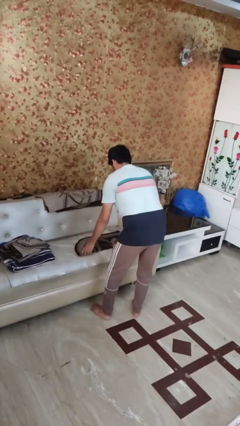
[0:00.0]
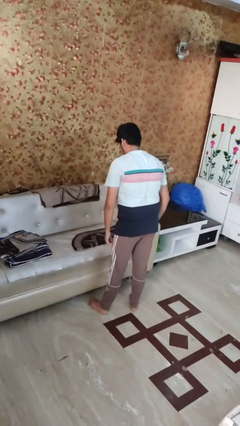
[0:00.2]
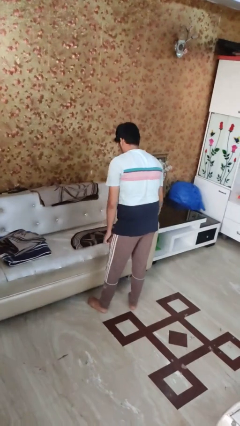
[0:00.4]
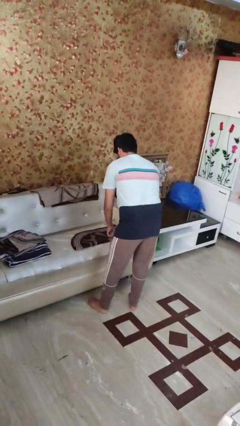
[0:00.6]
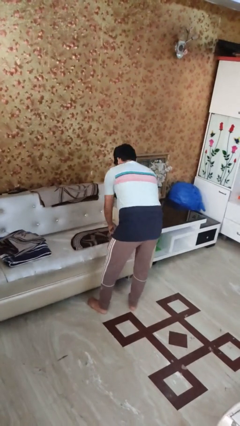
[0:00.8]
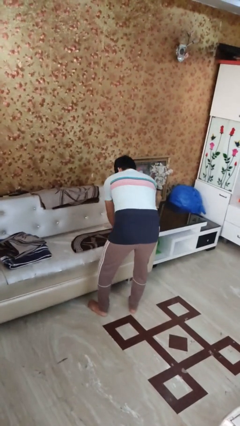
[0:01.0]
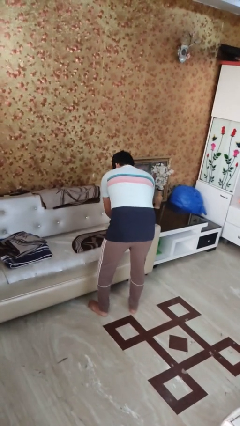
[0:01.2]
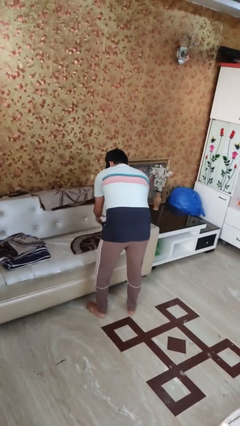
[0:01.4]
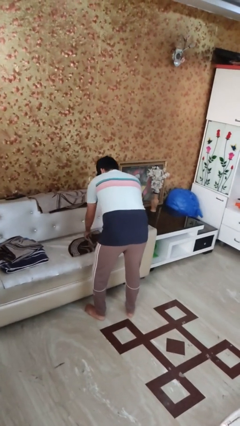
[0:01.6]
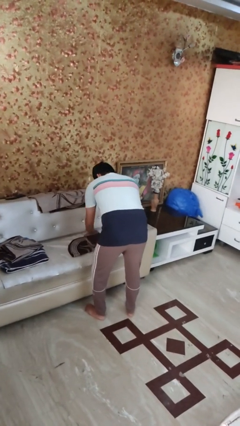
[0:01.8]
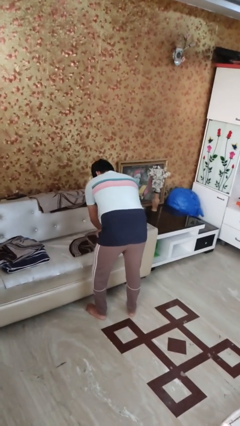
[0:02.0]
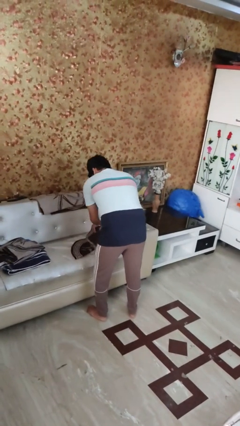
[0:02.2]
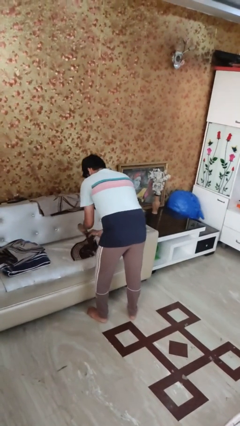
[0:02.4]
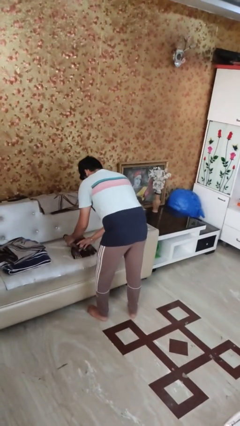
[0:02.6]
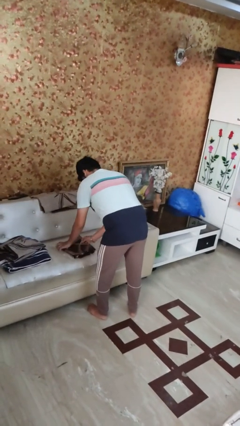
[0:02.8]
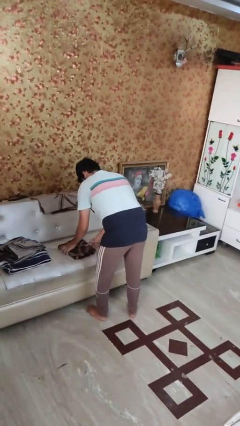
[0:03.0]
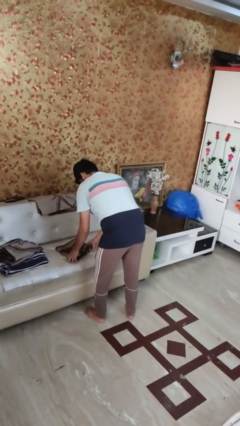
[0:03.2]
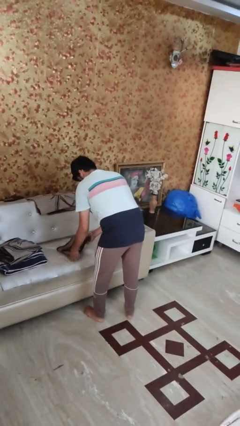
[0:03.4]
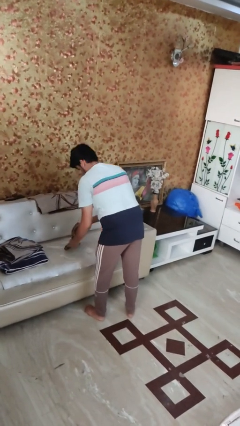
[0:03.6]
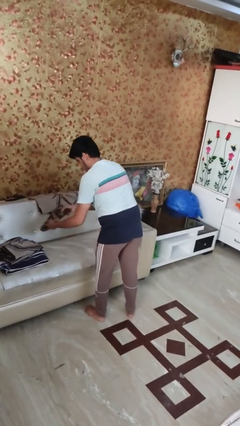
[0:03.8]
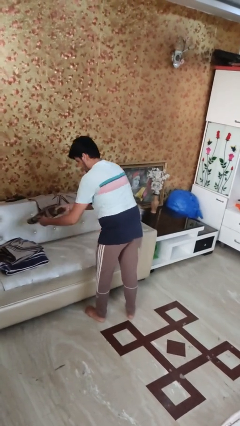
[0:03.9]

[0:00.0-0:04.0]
person folds towel

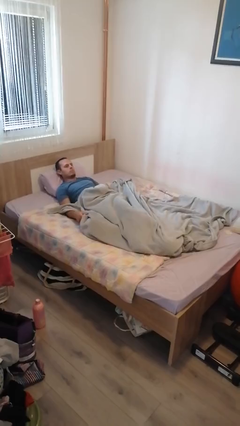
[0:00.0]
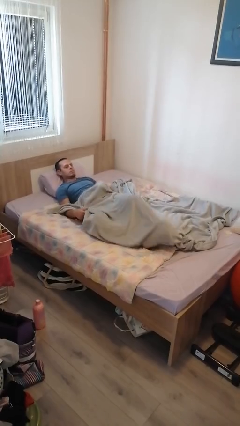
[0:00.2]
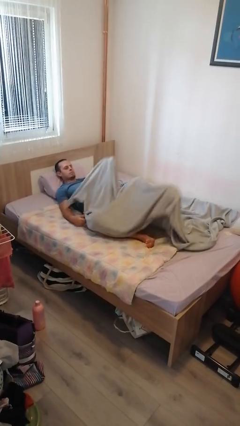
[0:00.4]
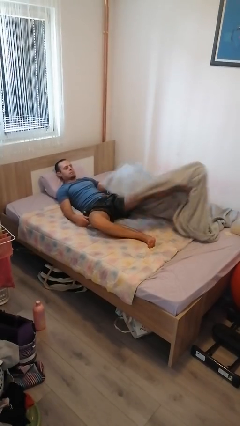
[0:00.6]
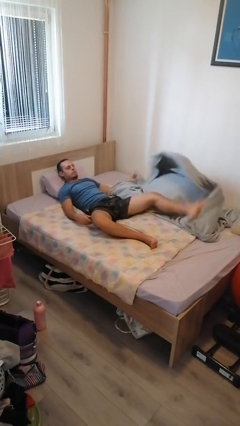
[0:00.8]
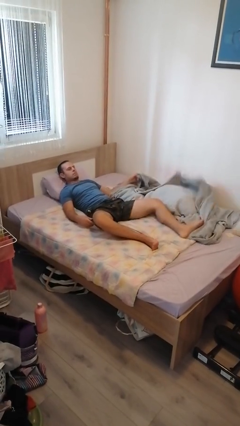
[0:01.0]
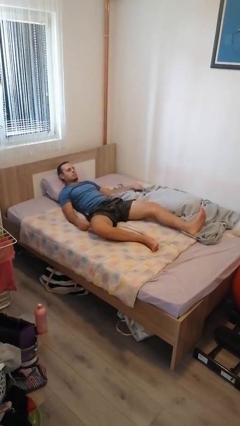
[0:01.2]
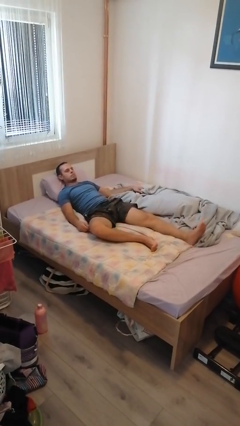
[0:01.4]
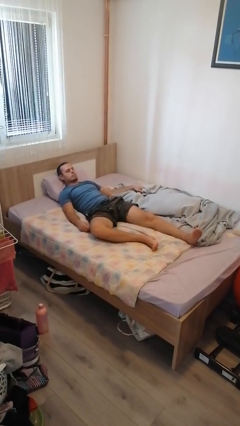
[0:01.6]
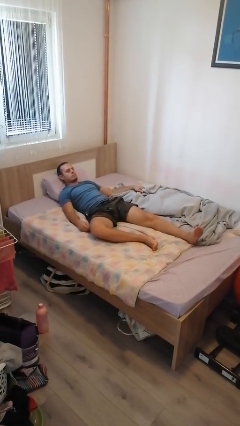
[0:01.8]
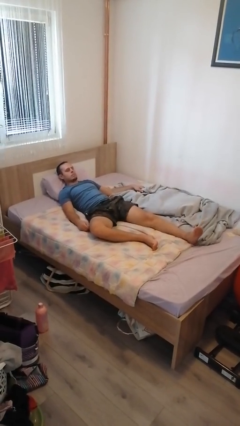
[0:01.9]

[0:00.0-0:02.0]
person uncovers with bedsheets

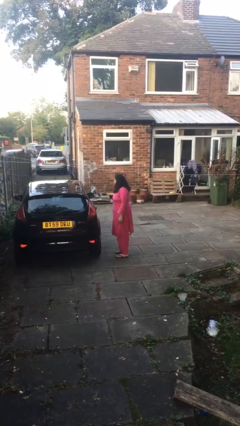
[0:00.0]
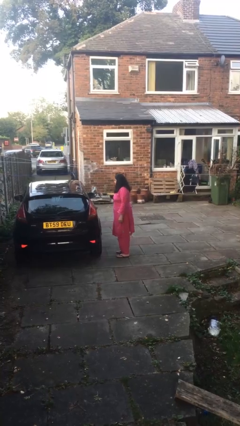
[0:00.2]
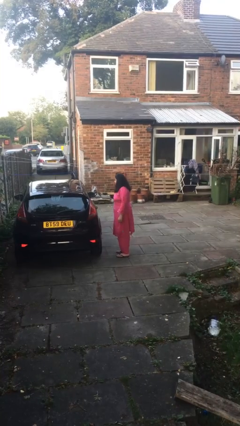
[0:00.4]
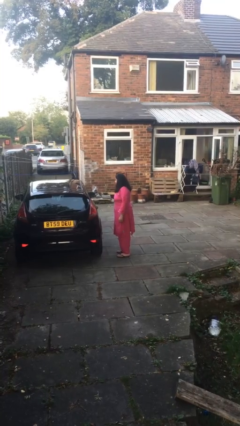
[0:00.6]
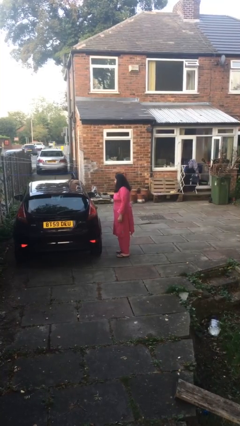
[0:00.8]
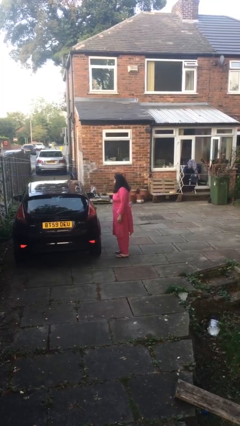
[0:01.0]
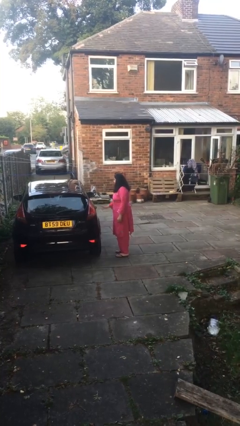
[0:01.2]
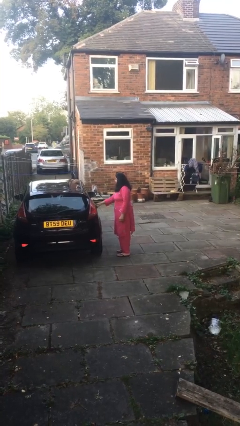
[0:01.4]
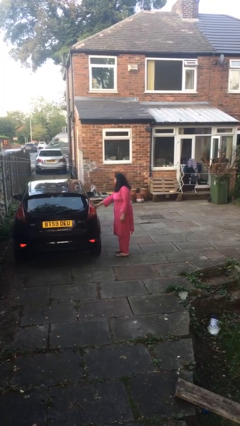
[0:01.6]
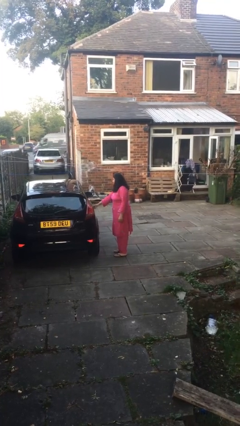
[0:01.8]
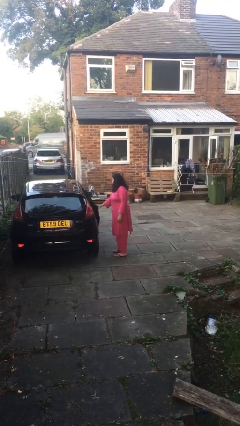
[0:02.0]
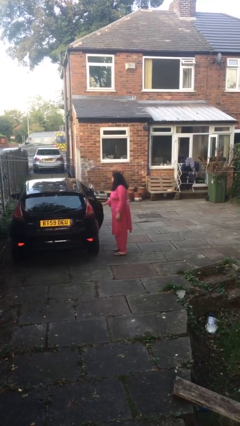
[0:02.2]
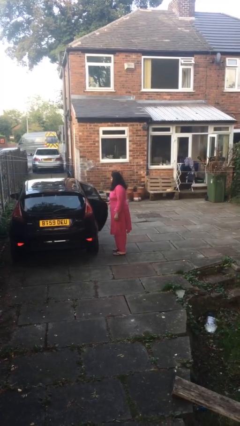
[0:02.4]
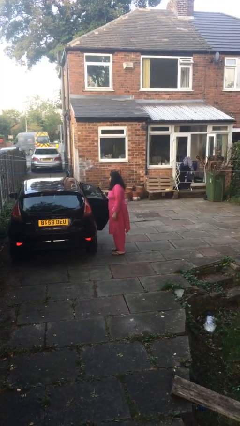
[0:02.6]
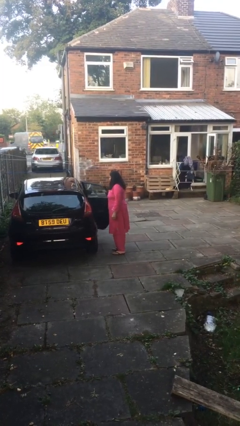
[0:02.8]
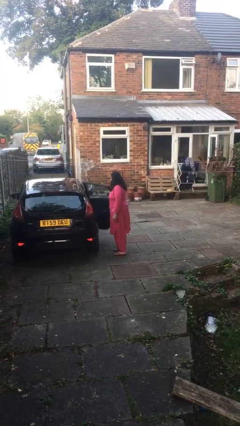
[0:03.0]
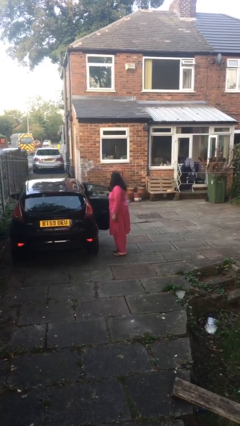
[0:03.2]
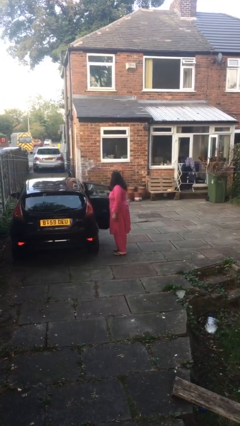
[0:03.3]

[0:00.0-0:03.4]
person opens car door

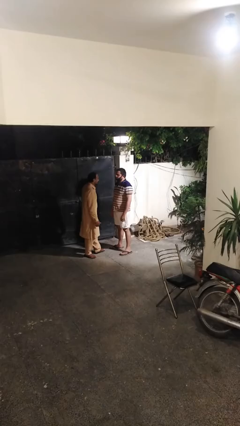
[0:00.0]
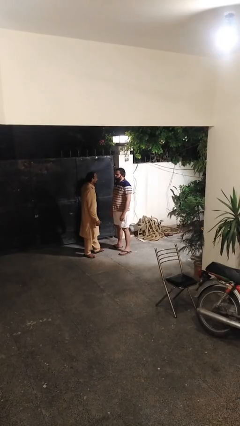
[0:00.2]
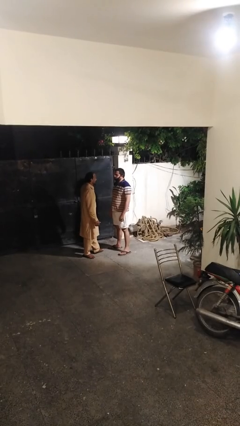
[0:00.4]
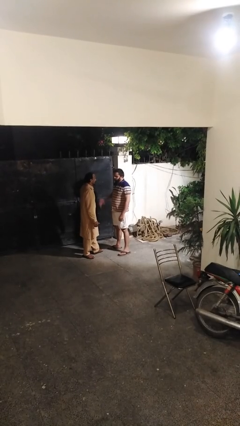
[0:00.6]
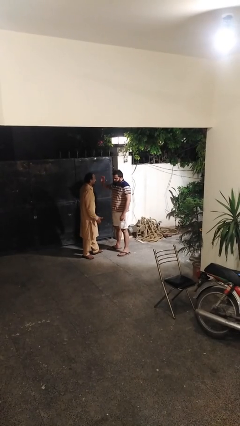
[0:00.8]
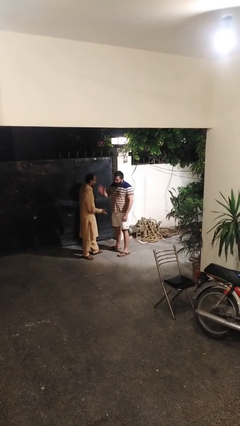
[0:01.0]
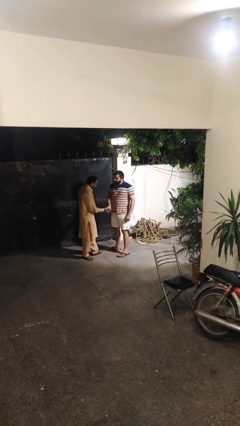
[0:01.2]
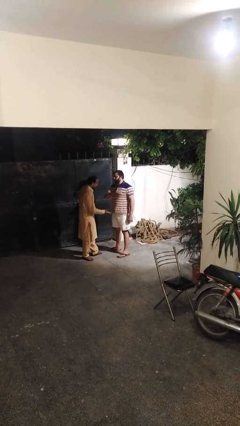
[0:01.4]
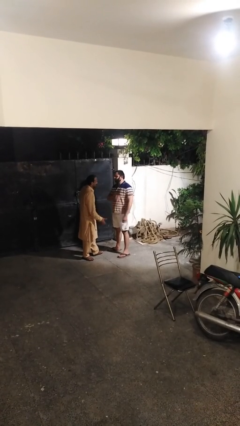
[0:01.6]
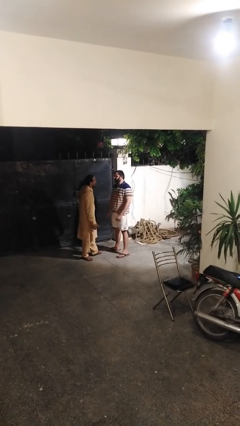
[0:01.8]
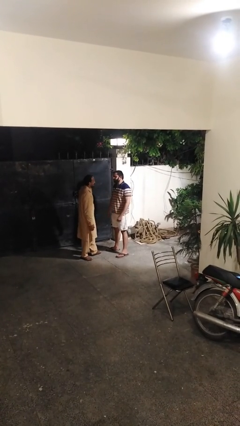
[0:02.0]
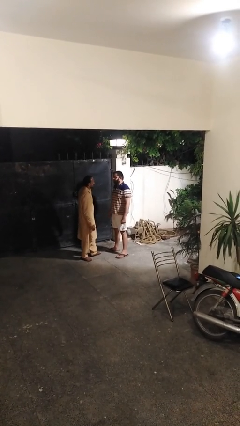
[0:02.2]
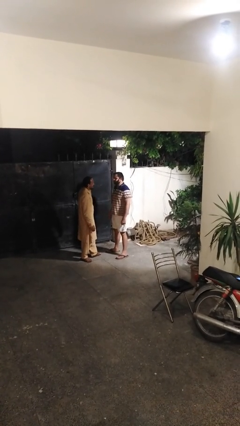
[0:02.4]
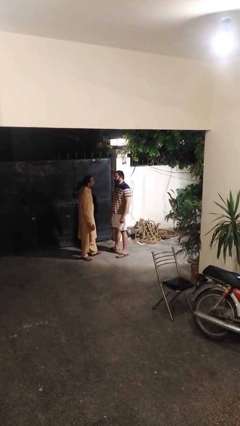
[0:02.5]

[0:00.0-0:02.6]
person highfives hand

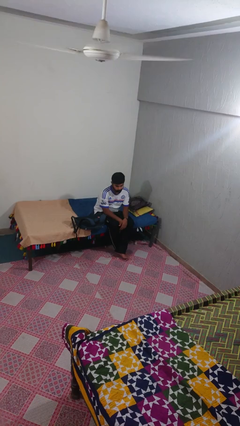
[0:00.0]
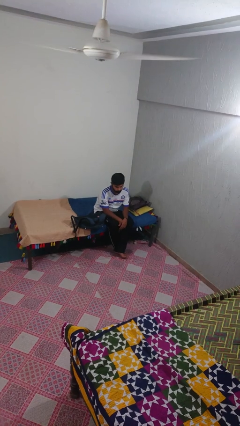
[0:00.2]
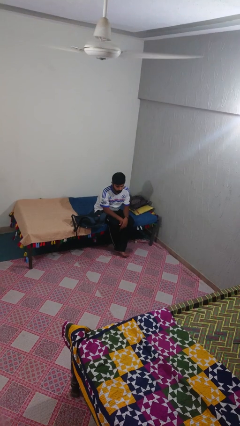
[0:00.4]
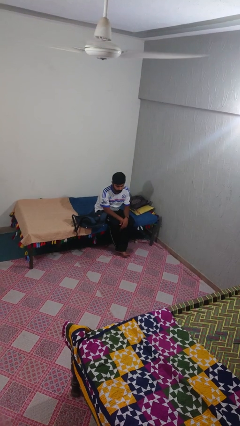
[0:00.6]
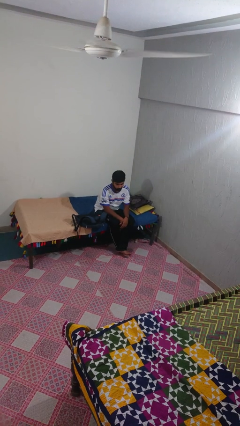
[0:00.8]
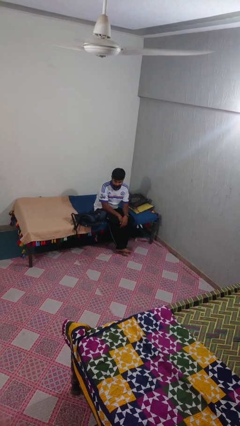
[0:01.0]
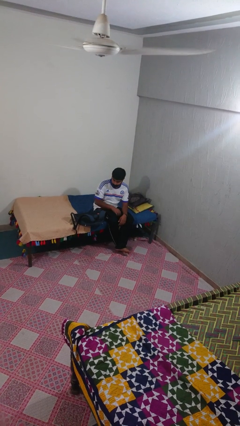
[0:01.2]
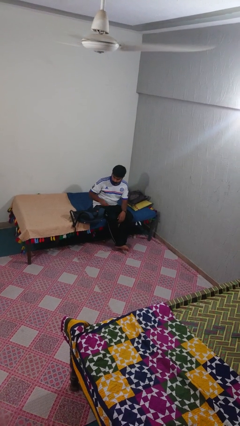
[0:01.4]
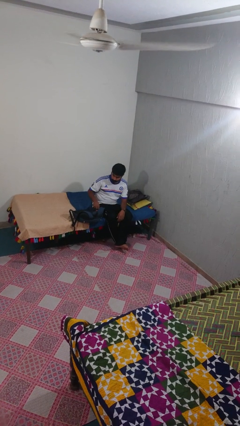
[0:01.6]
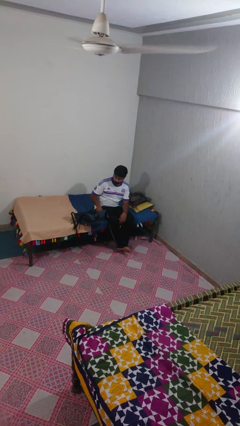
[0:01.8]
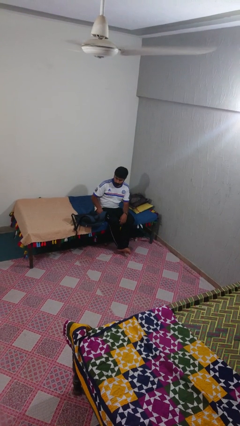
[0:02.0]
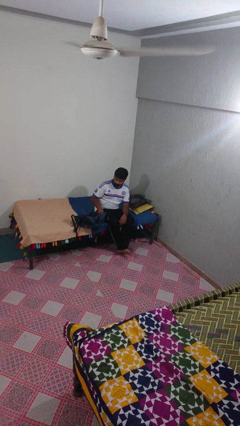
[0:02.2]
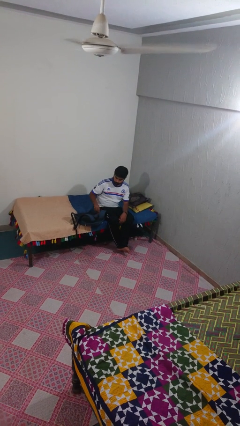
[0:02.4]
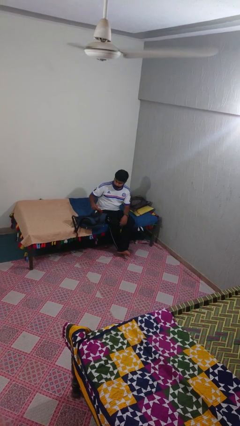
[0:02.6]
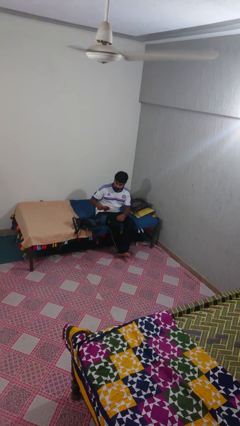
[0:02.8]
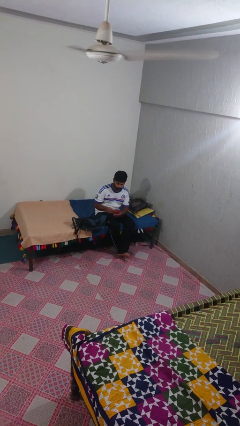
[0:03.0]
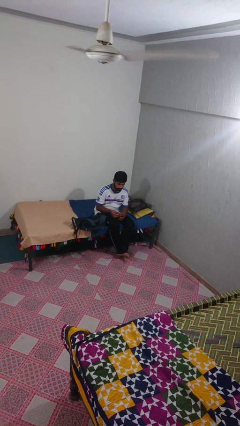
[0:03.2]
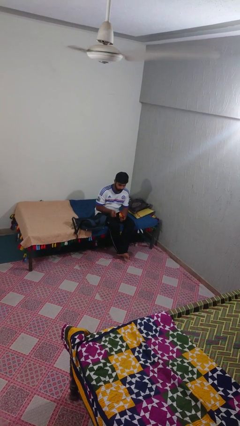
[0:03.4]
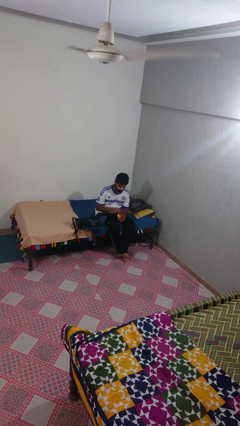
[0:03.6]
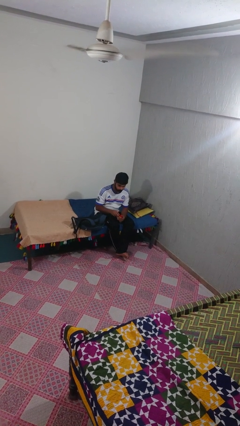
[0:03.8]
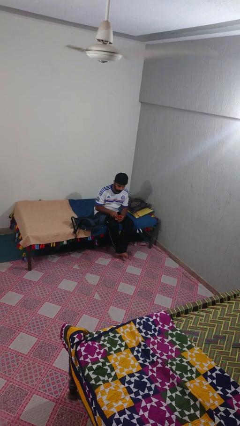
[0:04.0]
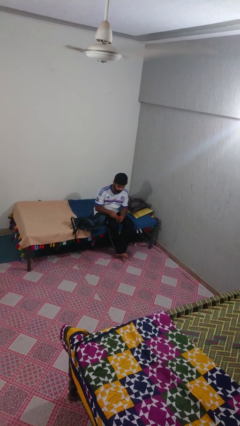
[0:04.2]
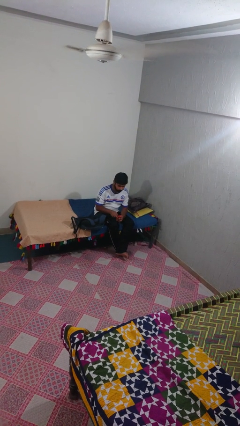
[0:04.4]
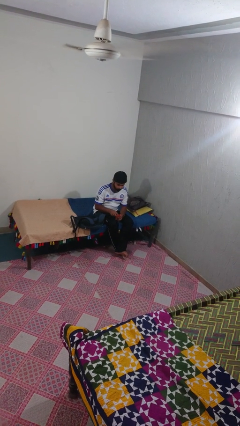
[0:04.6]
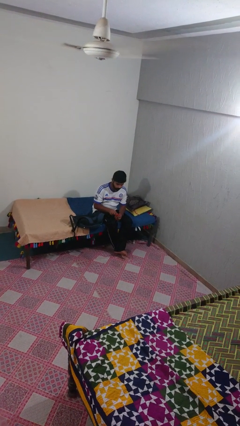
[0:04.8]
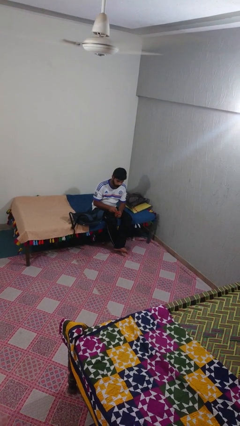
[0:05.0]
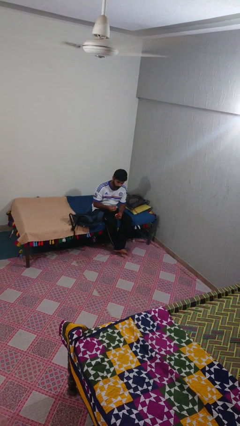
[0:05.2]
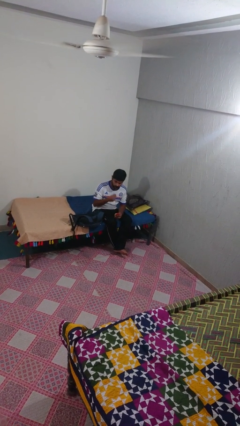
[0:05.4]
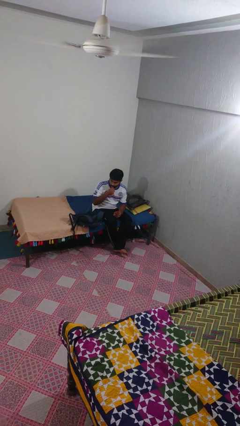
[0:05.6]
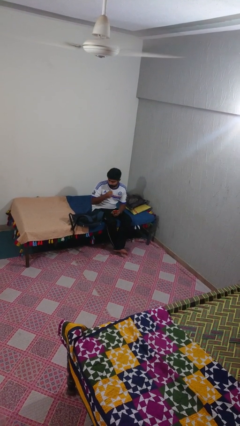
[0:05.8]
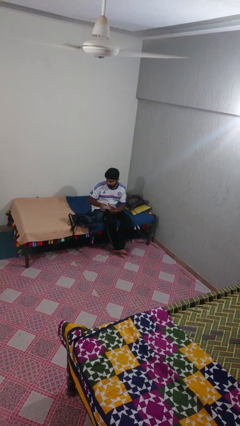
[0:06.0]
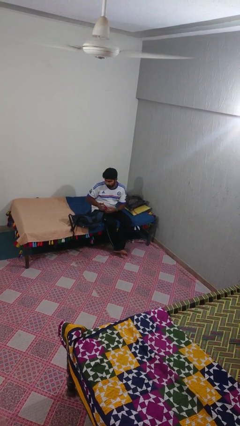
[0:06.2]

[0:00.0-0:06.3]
person eats snack from bag
